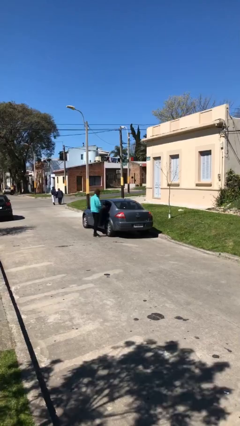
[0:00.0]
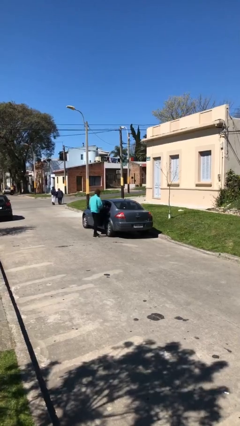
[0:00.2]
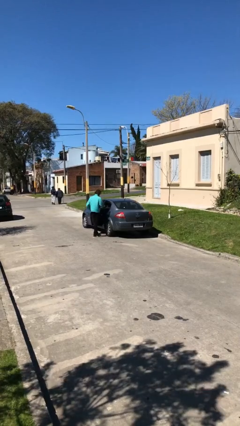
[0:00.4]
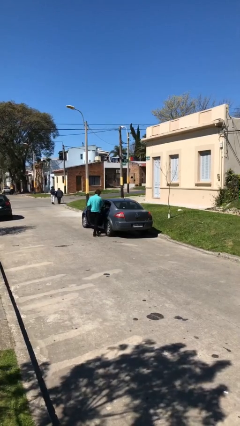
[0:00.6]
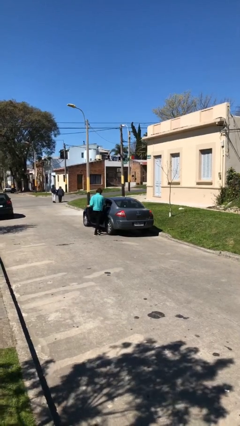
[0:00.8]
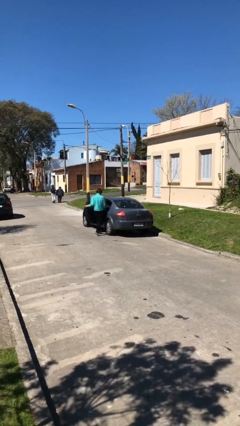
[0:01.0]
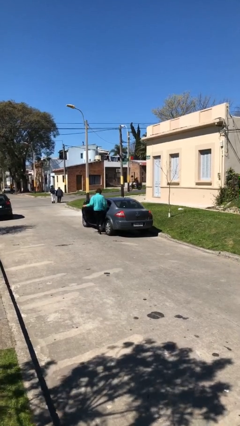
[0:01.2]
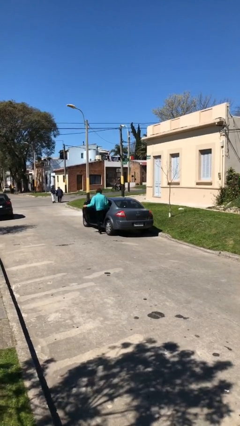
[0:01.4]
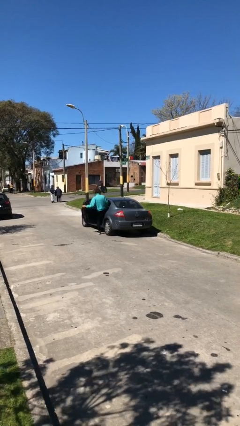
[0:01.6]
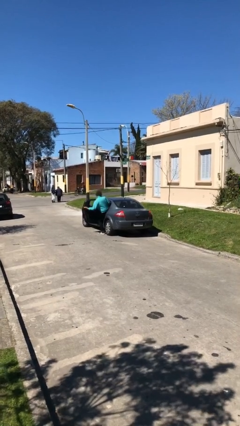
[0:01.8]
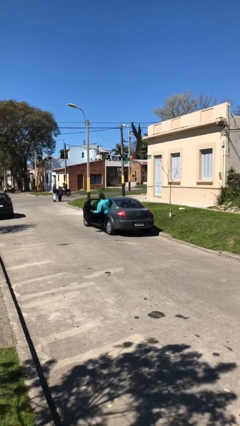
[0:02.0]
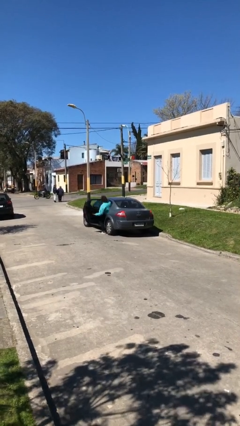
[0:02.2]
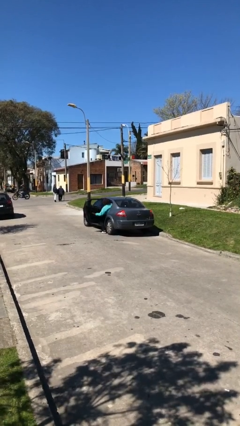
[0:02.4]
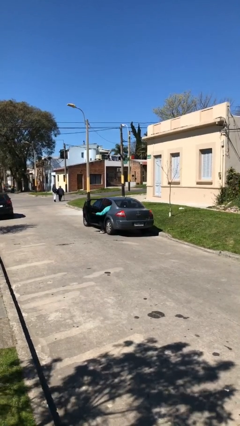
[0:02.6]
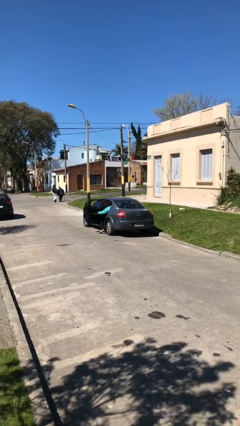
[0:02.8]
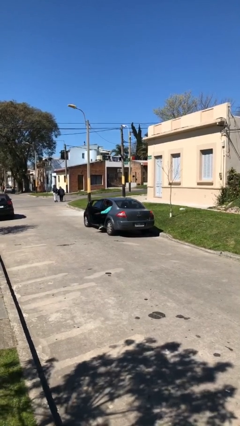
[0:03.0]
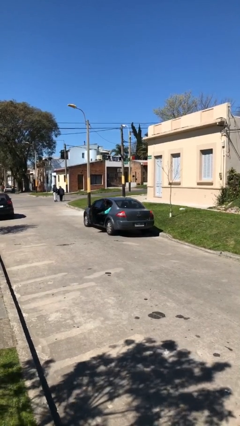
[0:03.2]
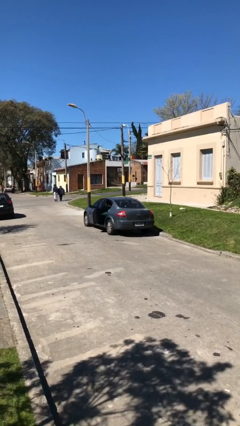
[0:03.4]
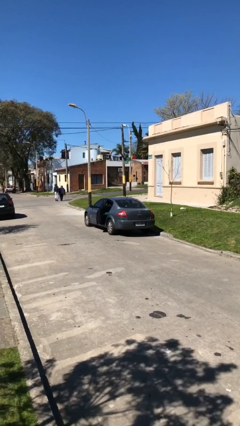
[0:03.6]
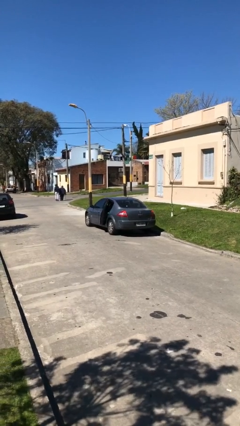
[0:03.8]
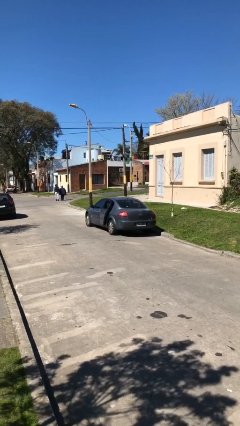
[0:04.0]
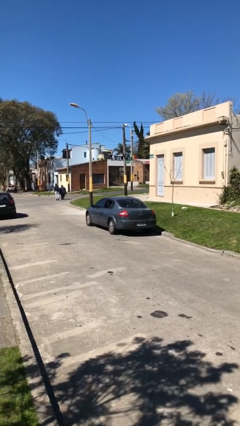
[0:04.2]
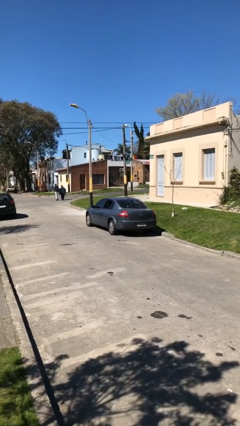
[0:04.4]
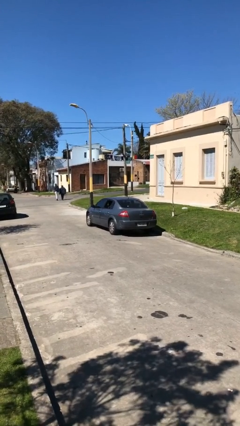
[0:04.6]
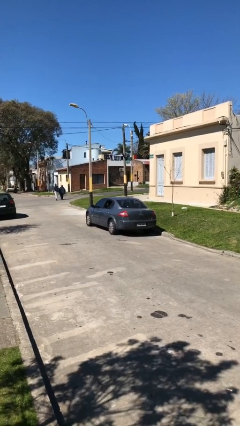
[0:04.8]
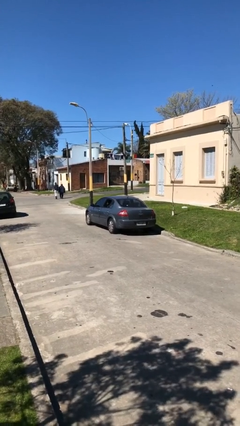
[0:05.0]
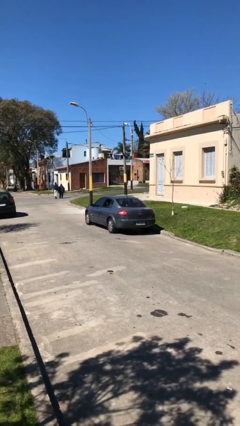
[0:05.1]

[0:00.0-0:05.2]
car picks up person

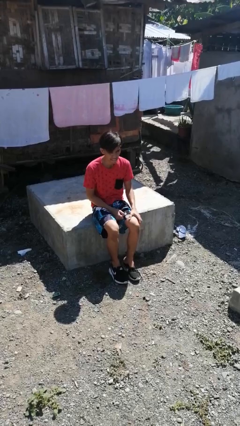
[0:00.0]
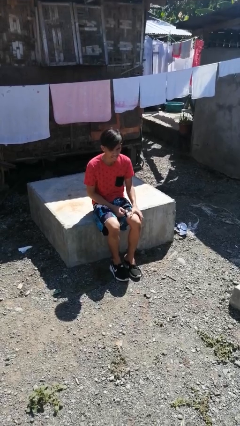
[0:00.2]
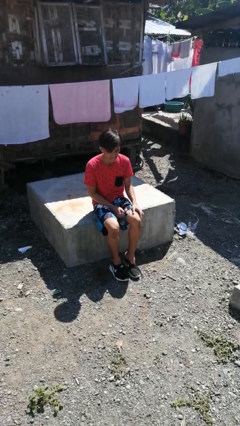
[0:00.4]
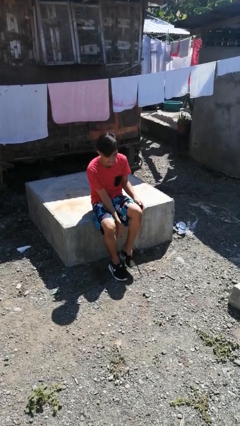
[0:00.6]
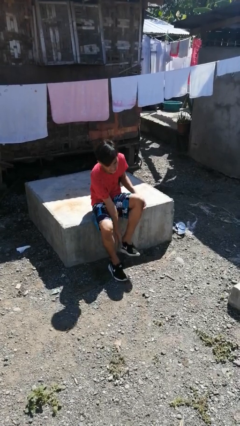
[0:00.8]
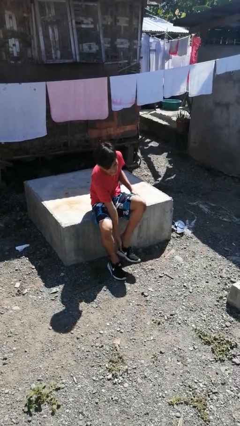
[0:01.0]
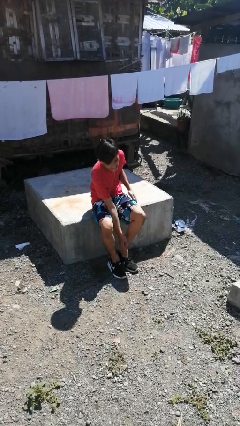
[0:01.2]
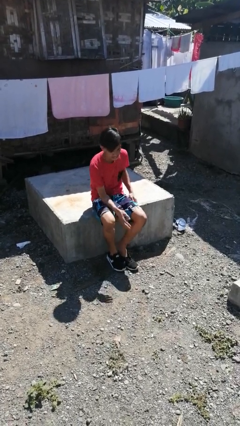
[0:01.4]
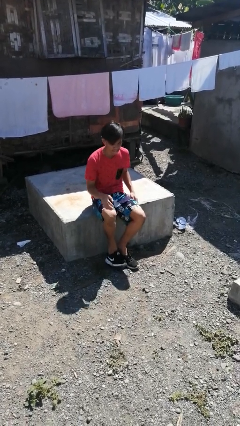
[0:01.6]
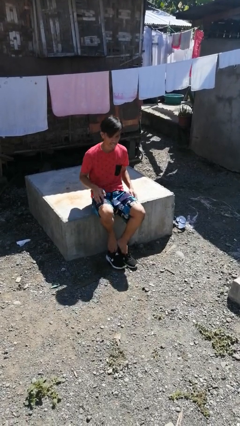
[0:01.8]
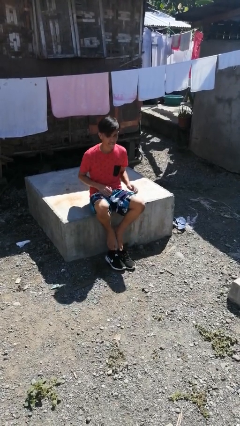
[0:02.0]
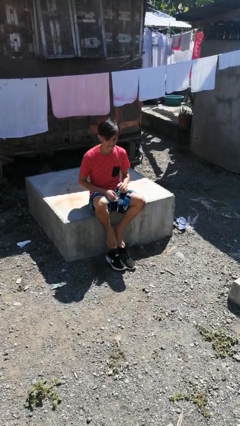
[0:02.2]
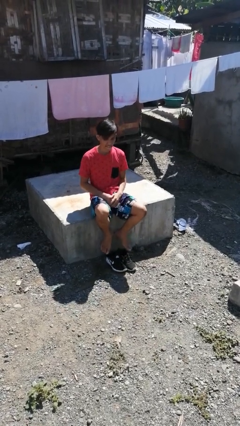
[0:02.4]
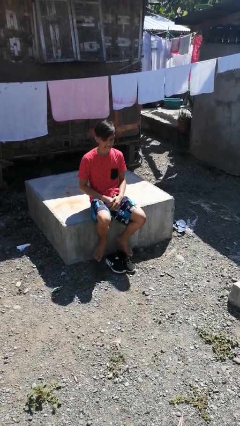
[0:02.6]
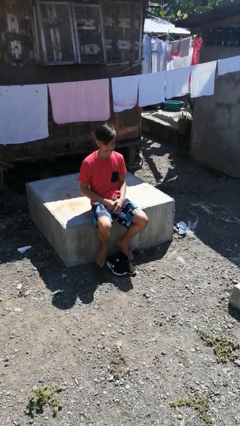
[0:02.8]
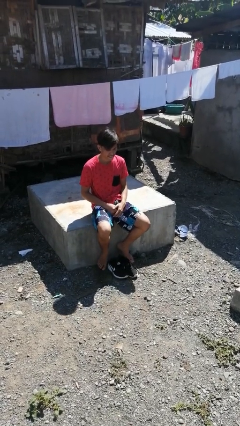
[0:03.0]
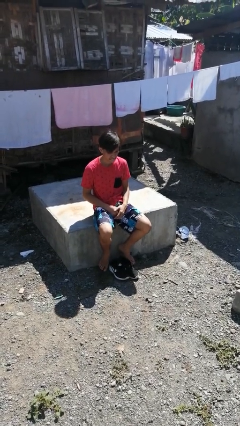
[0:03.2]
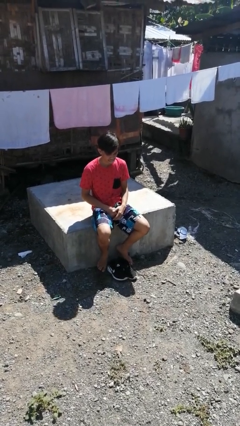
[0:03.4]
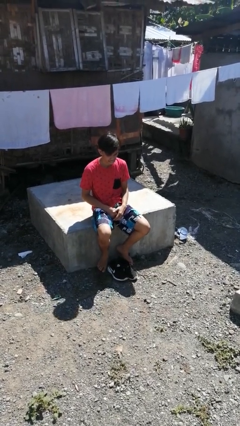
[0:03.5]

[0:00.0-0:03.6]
person takes off shoes

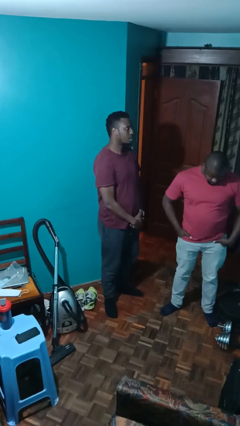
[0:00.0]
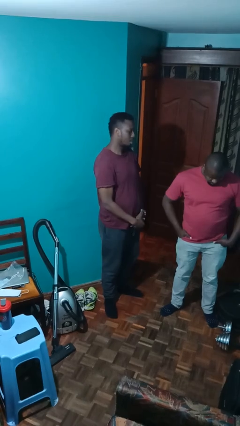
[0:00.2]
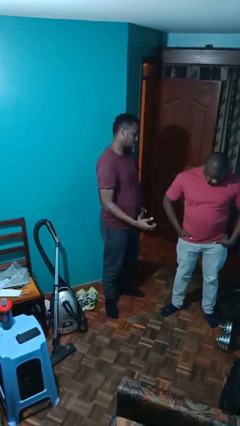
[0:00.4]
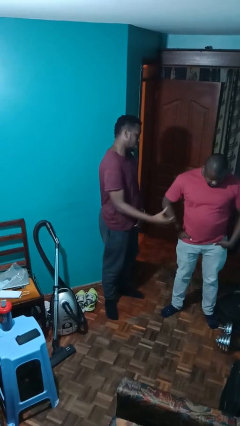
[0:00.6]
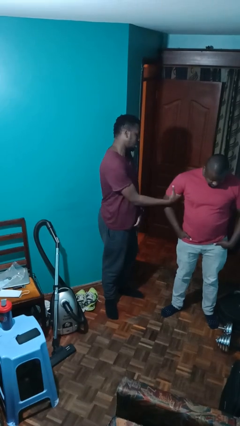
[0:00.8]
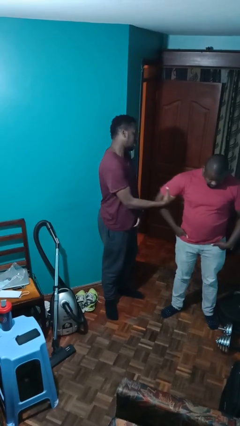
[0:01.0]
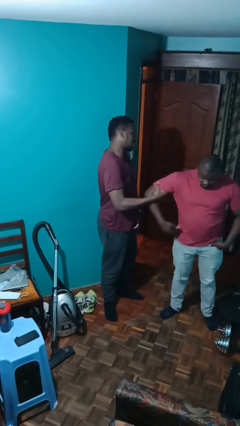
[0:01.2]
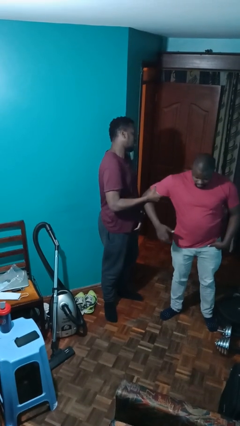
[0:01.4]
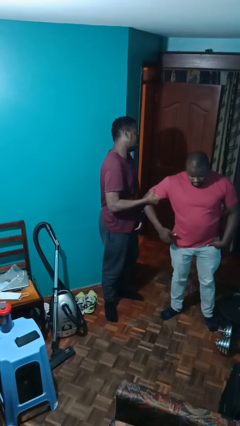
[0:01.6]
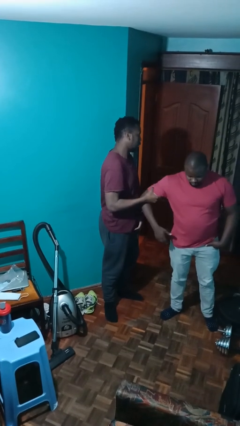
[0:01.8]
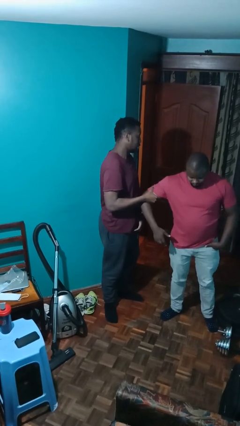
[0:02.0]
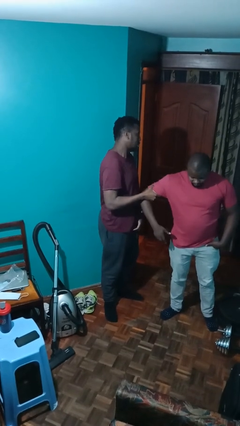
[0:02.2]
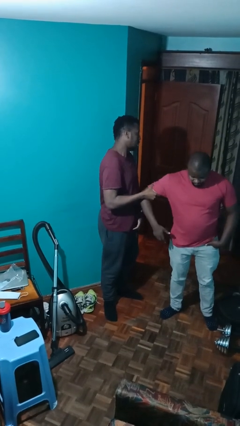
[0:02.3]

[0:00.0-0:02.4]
person grabs person by bicep

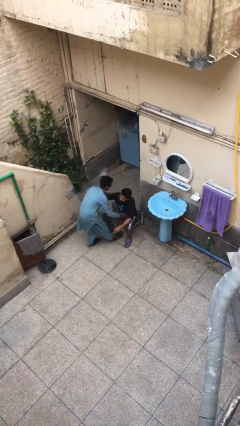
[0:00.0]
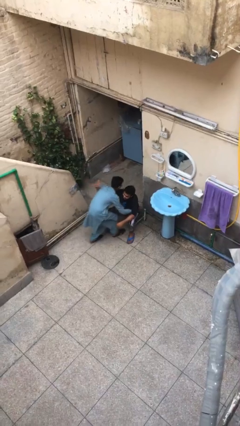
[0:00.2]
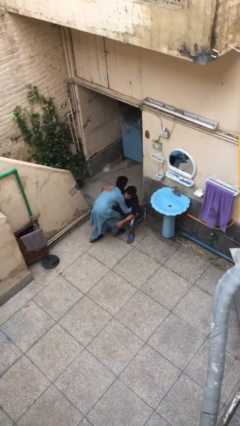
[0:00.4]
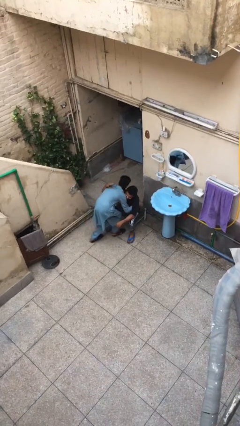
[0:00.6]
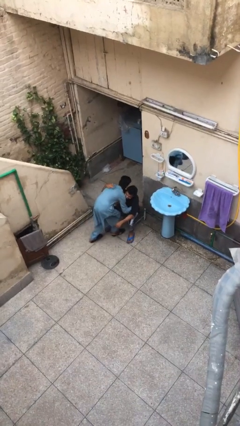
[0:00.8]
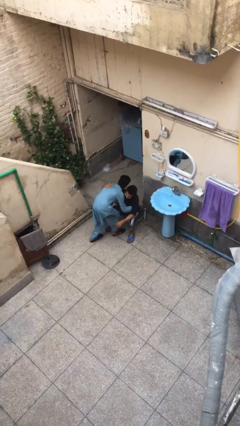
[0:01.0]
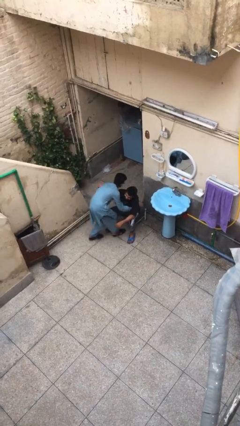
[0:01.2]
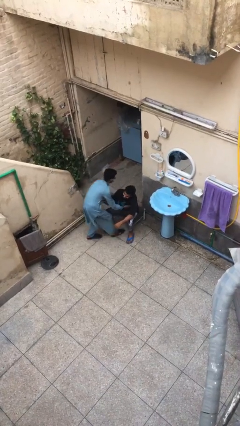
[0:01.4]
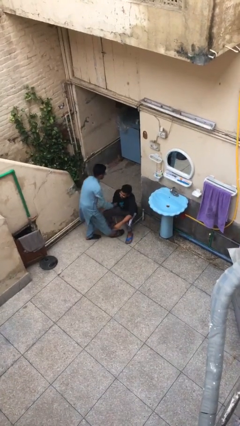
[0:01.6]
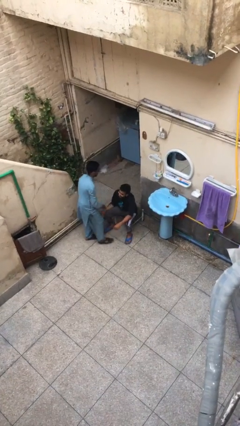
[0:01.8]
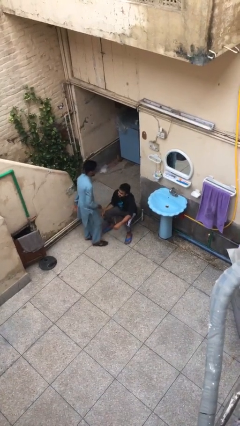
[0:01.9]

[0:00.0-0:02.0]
person embraces person

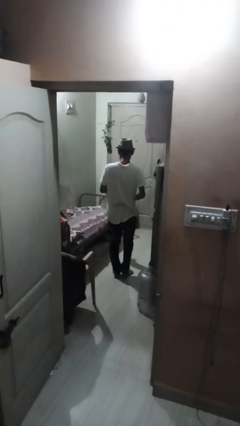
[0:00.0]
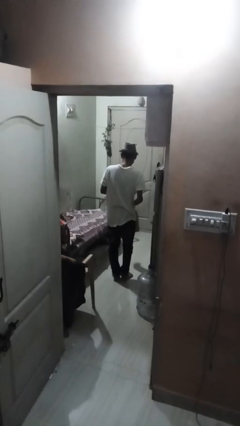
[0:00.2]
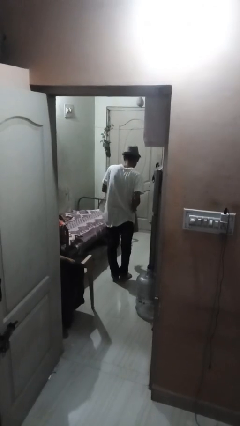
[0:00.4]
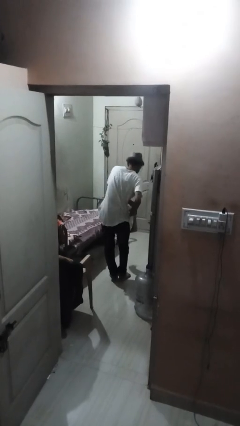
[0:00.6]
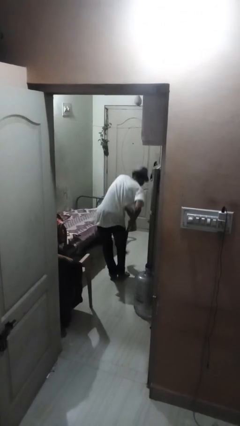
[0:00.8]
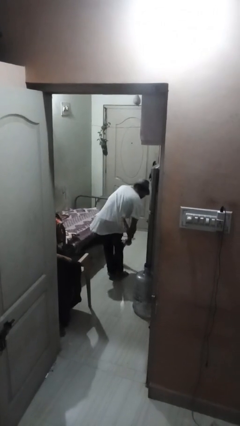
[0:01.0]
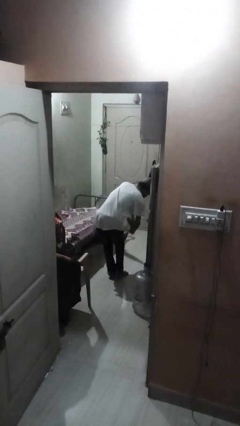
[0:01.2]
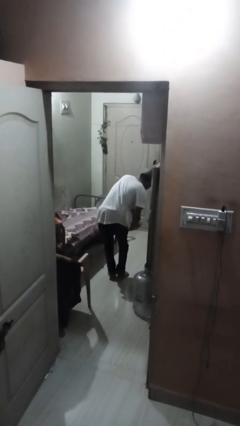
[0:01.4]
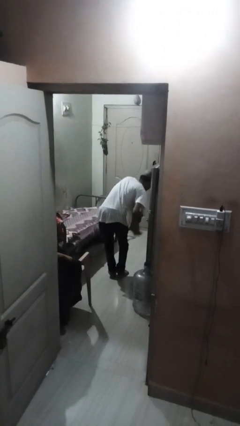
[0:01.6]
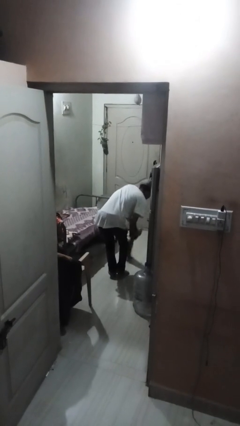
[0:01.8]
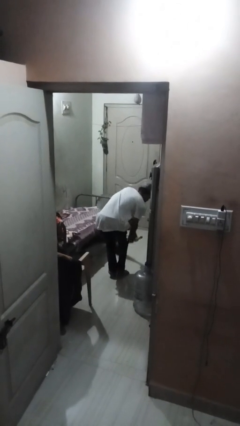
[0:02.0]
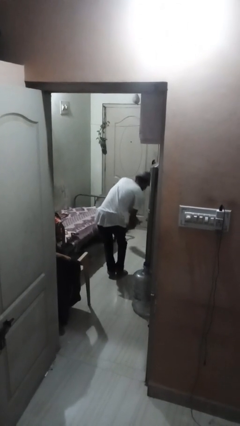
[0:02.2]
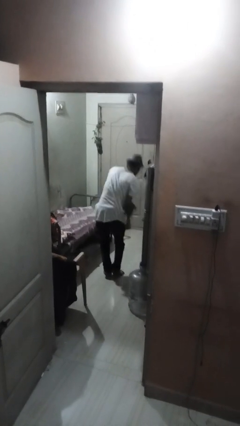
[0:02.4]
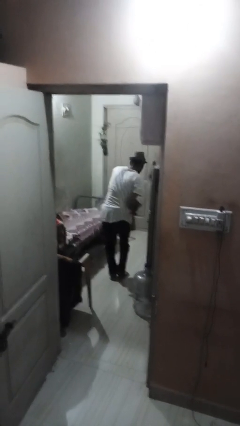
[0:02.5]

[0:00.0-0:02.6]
person mops

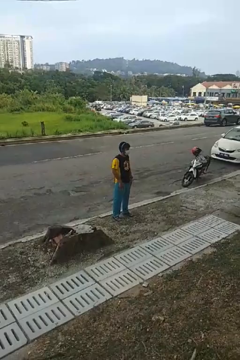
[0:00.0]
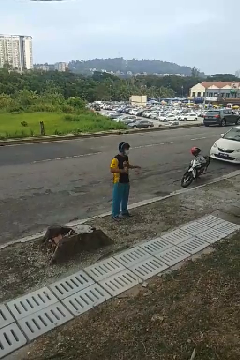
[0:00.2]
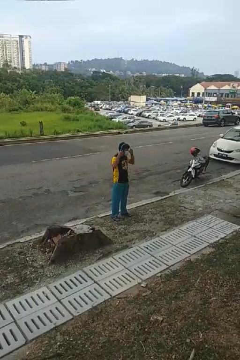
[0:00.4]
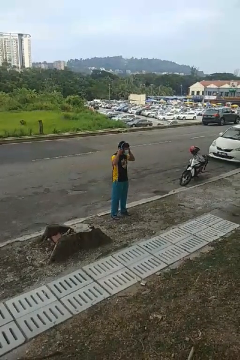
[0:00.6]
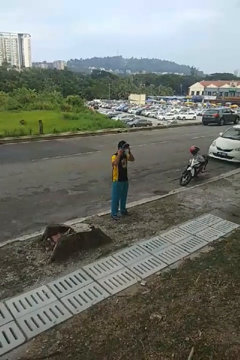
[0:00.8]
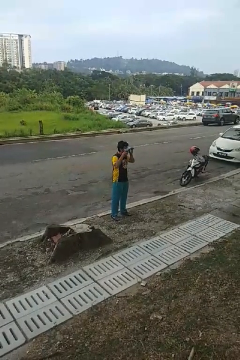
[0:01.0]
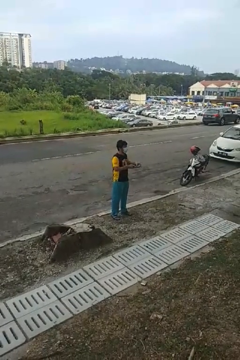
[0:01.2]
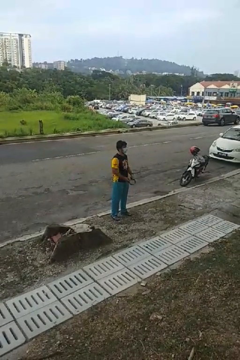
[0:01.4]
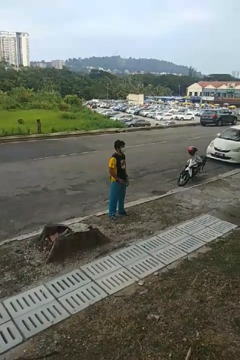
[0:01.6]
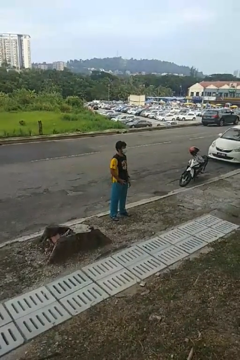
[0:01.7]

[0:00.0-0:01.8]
person takes off headphones
